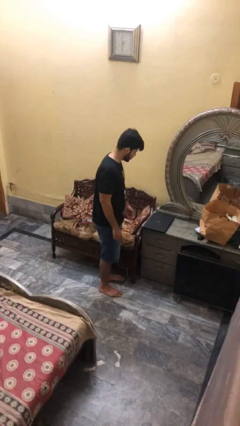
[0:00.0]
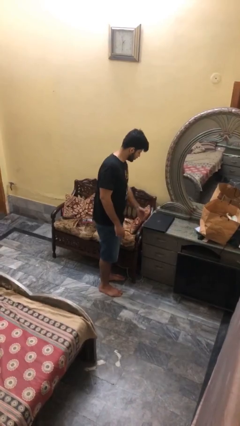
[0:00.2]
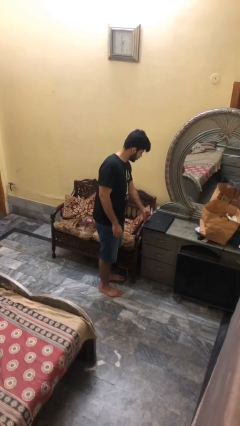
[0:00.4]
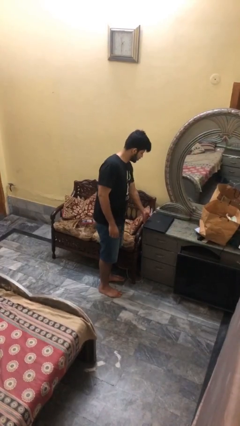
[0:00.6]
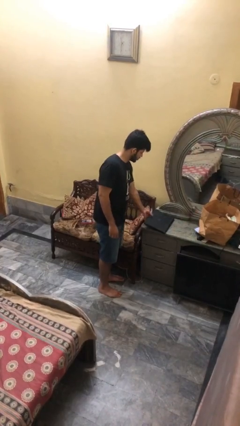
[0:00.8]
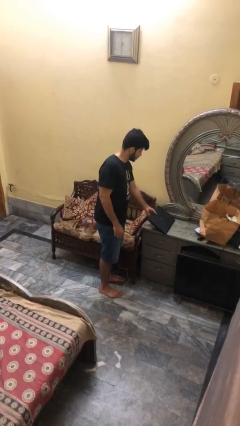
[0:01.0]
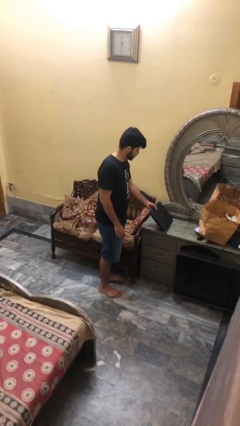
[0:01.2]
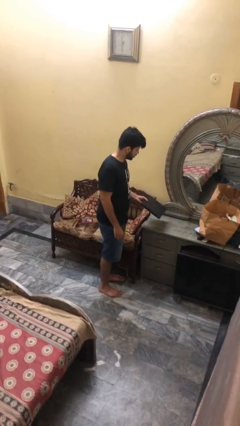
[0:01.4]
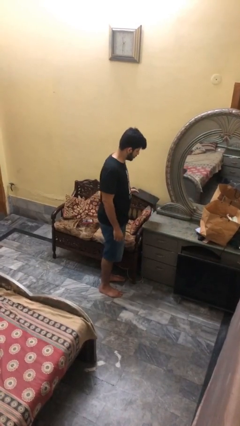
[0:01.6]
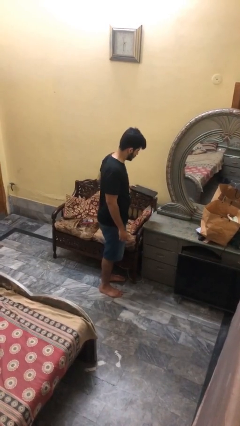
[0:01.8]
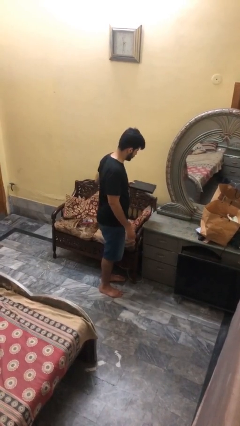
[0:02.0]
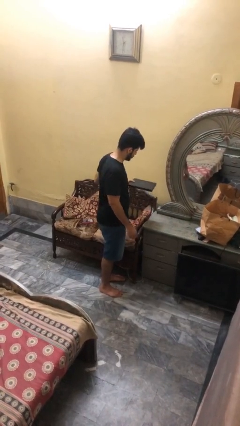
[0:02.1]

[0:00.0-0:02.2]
person picks up object from countertop

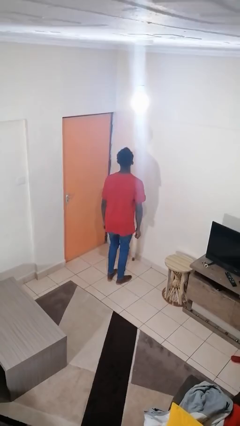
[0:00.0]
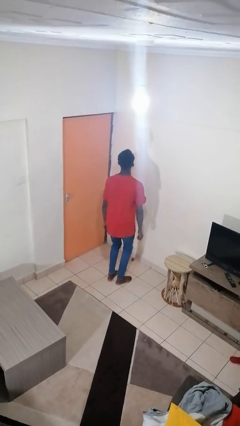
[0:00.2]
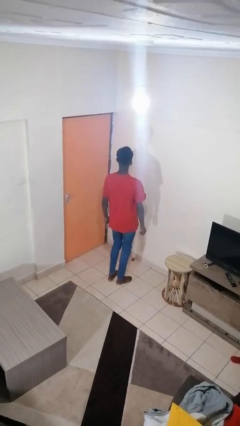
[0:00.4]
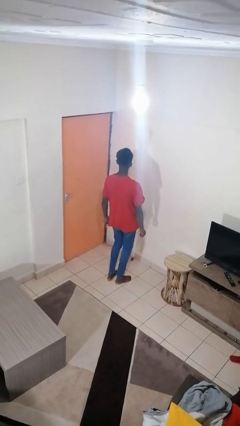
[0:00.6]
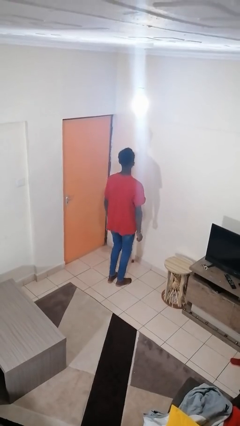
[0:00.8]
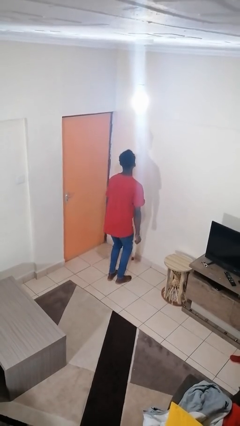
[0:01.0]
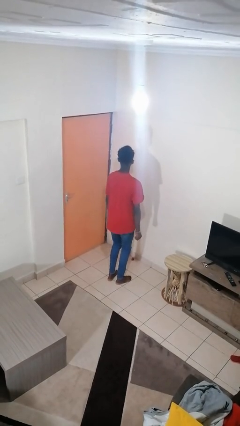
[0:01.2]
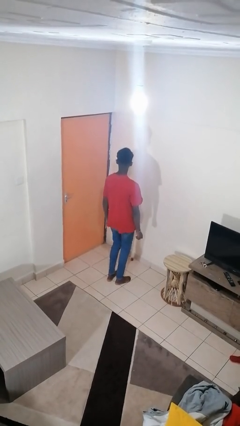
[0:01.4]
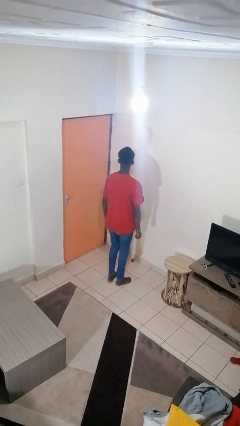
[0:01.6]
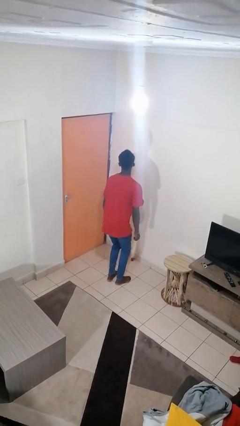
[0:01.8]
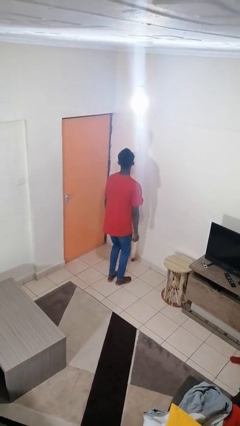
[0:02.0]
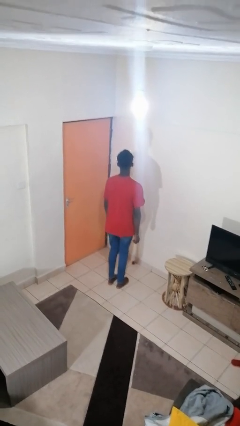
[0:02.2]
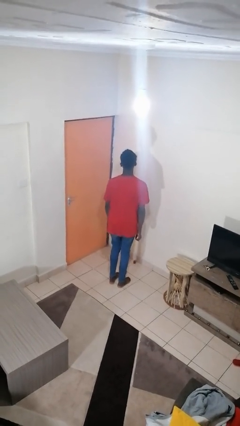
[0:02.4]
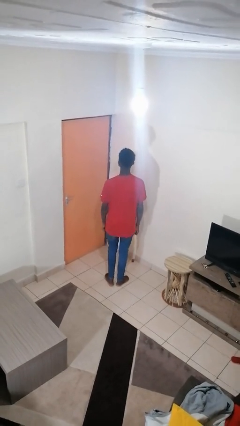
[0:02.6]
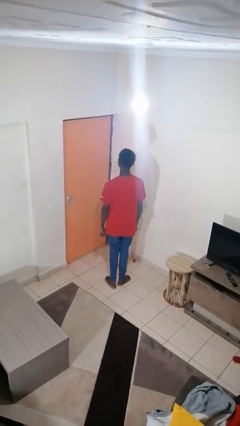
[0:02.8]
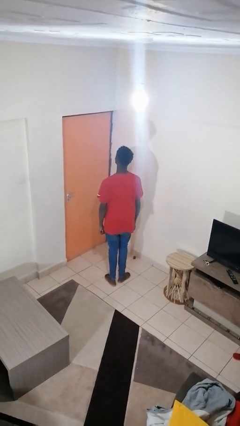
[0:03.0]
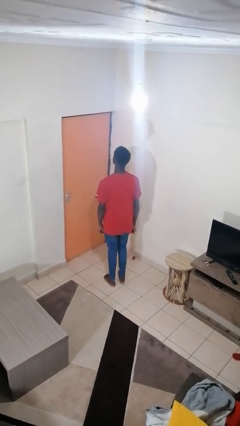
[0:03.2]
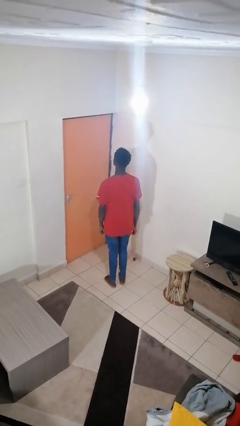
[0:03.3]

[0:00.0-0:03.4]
person wiggles hips

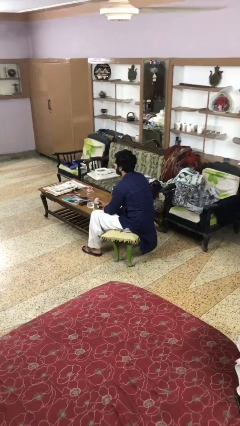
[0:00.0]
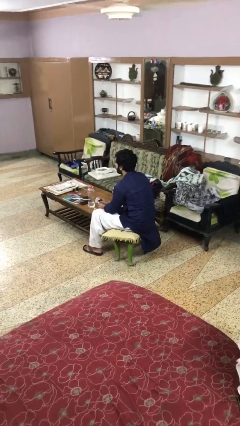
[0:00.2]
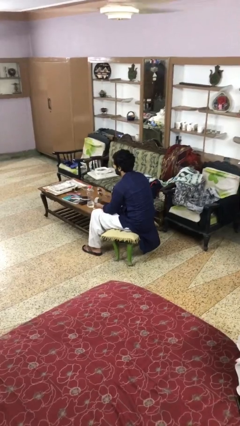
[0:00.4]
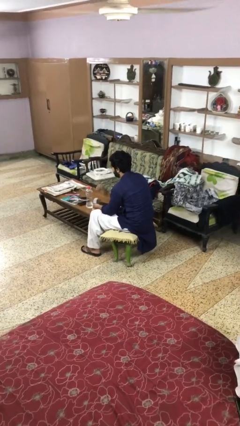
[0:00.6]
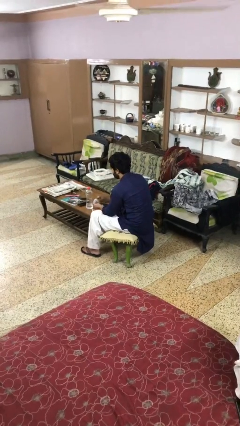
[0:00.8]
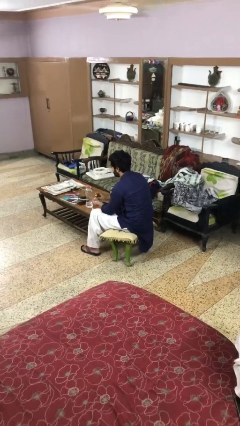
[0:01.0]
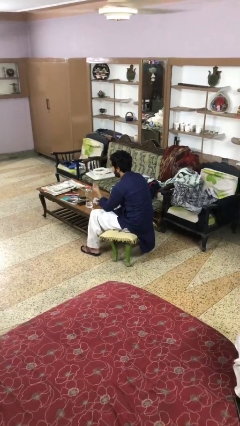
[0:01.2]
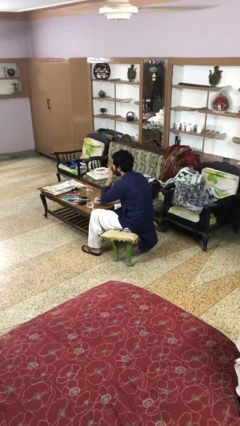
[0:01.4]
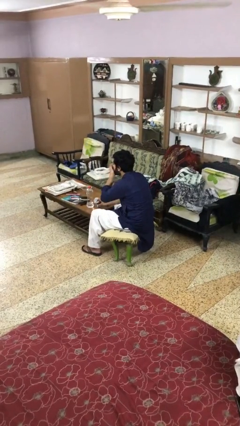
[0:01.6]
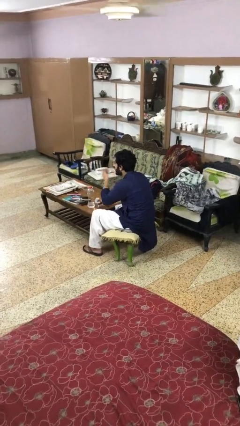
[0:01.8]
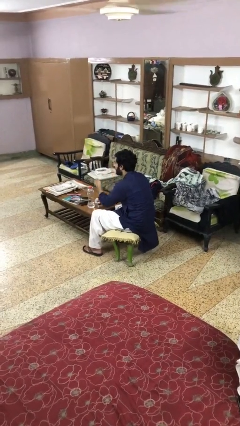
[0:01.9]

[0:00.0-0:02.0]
person takes medicine pills

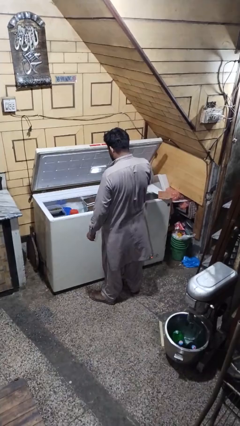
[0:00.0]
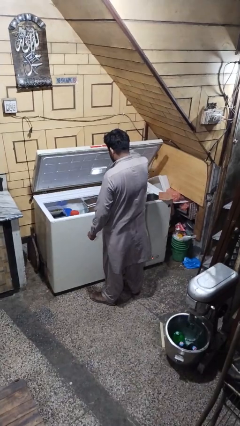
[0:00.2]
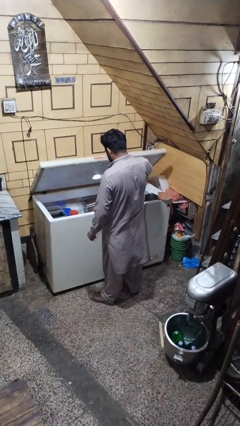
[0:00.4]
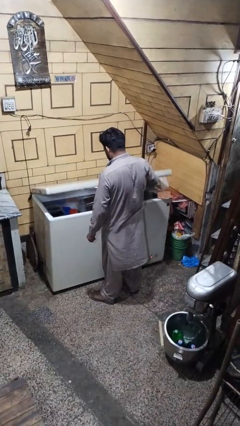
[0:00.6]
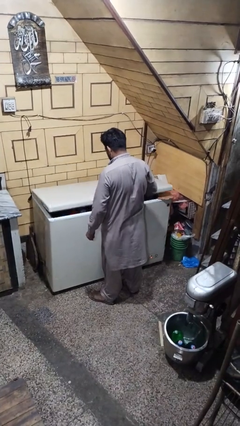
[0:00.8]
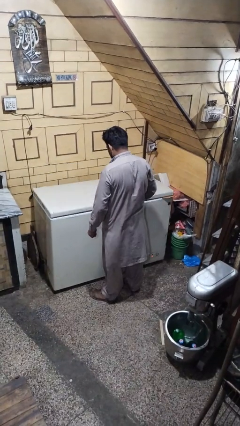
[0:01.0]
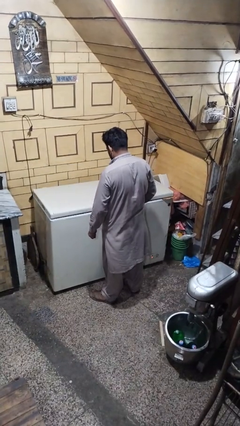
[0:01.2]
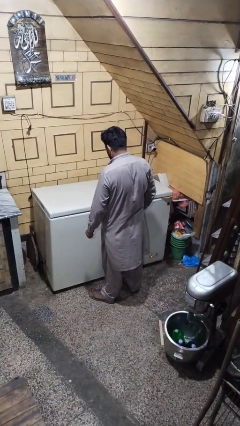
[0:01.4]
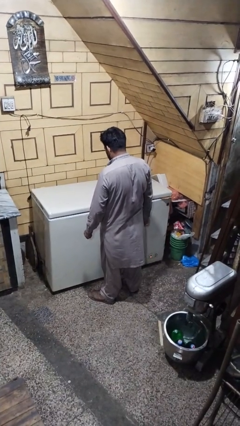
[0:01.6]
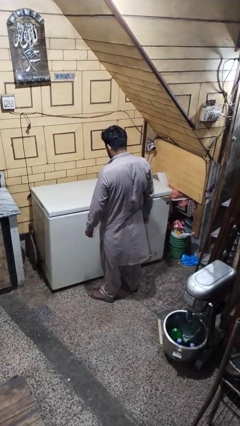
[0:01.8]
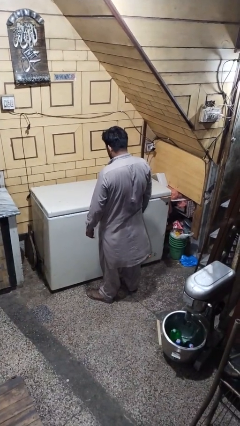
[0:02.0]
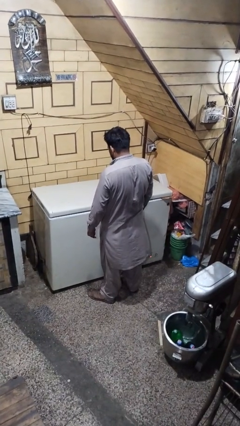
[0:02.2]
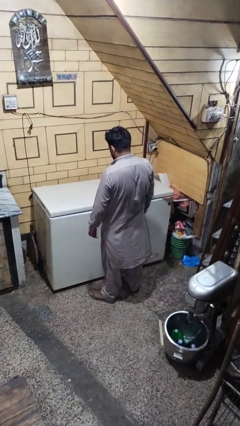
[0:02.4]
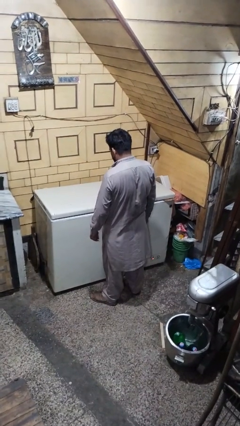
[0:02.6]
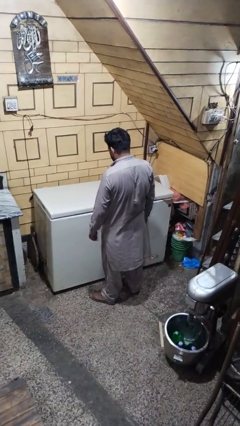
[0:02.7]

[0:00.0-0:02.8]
person closes refrigerator

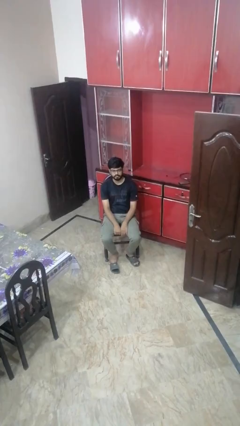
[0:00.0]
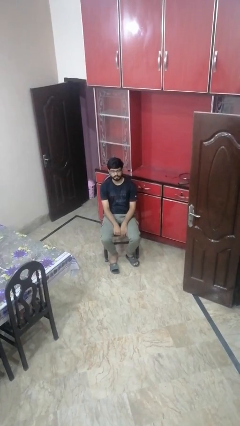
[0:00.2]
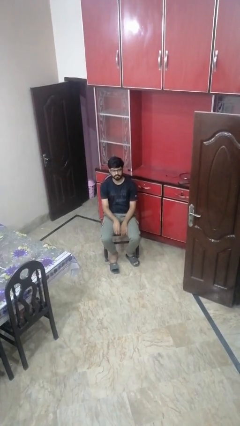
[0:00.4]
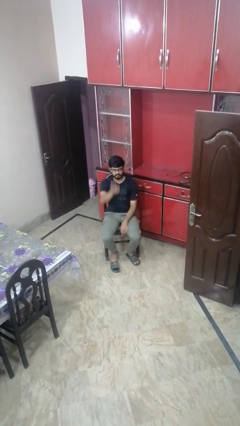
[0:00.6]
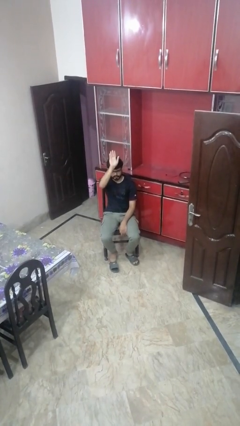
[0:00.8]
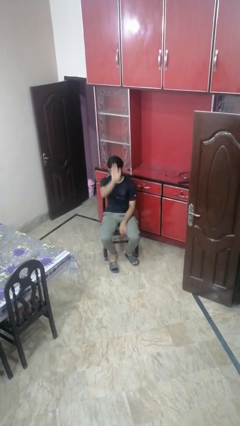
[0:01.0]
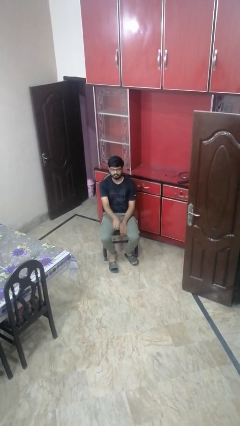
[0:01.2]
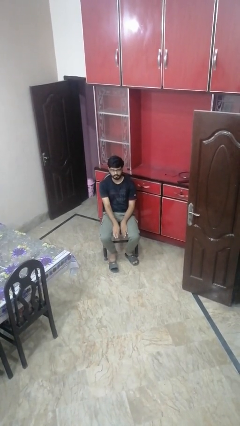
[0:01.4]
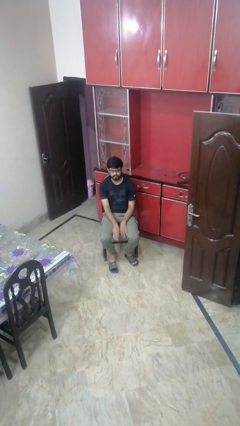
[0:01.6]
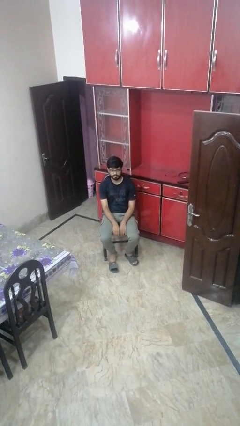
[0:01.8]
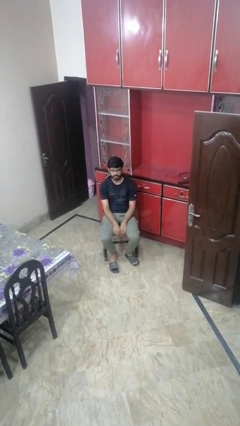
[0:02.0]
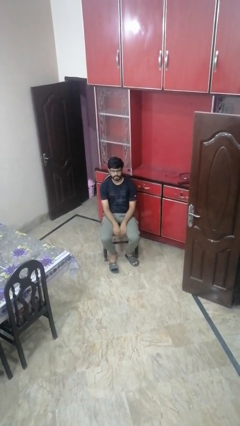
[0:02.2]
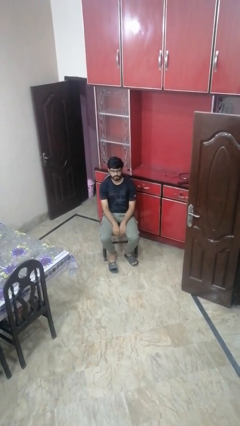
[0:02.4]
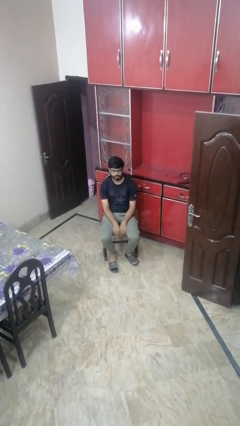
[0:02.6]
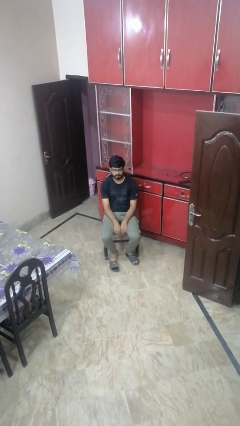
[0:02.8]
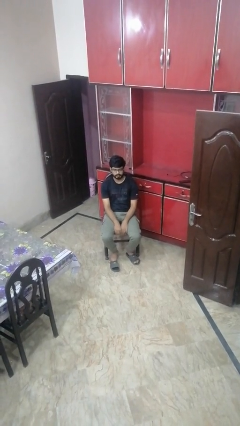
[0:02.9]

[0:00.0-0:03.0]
person gestures swipe down

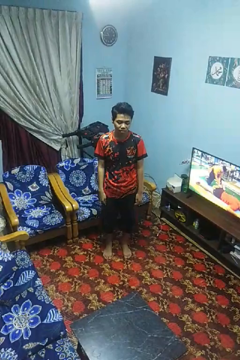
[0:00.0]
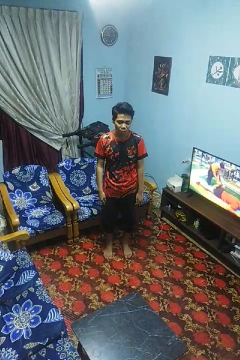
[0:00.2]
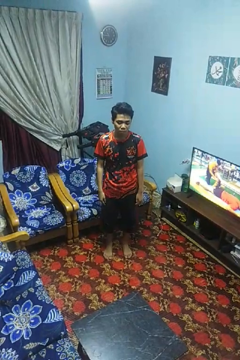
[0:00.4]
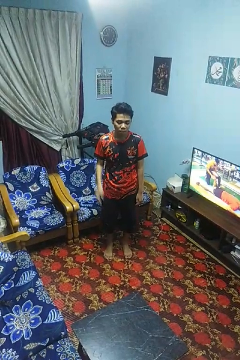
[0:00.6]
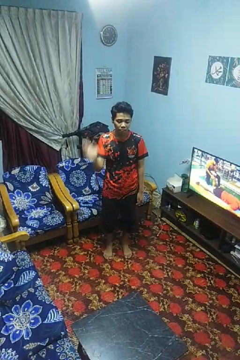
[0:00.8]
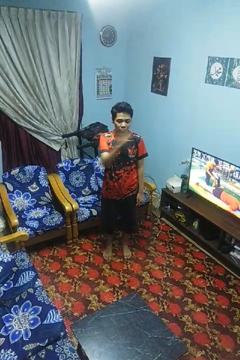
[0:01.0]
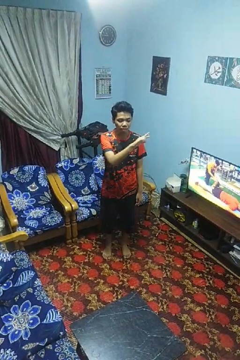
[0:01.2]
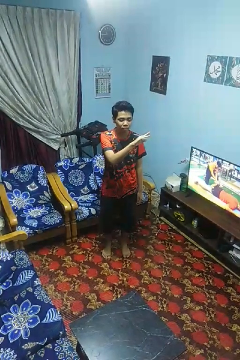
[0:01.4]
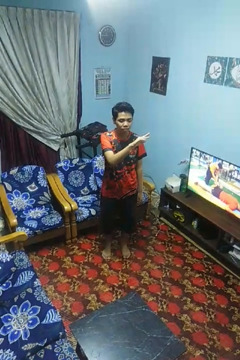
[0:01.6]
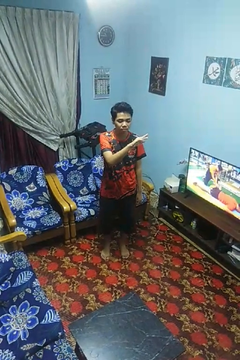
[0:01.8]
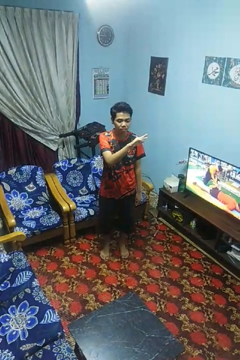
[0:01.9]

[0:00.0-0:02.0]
person gestures swipe left

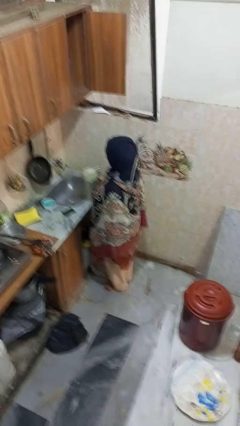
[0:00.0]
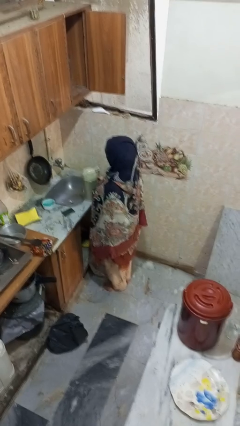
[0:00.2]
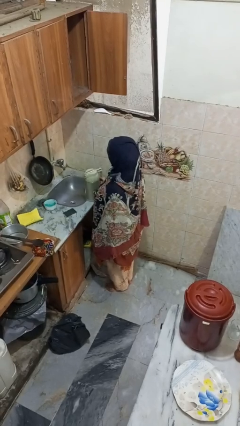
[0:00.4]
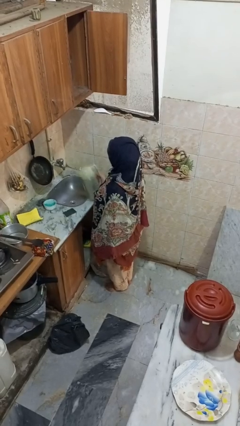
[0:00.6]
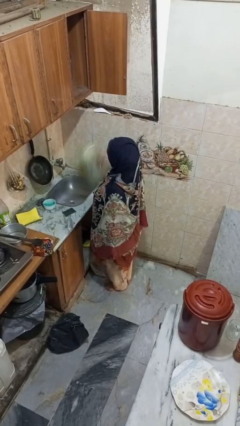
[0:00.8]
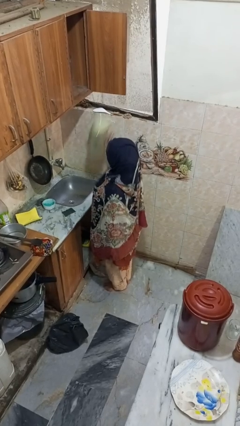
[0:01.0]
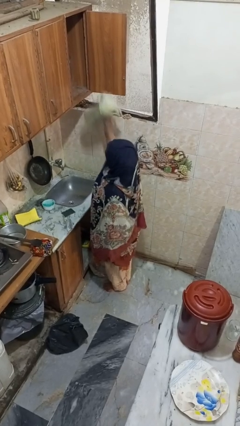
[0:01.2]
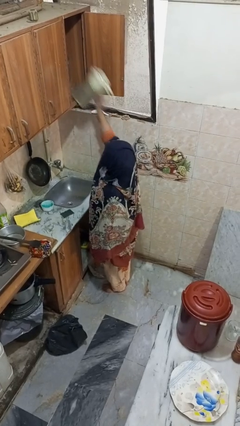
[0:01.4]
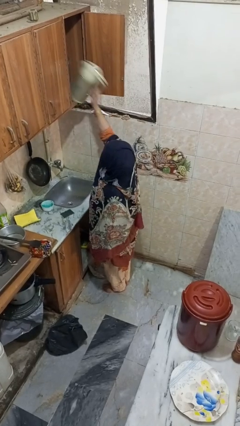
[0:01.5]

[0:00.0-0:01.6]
person takes object from cabinet

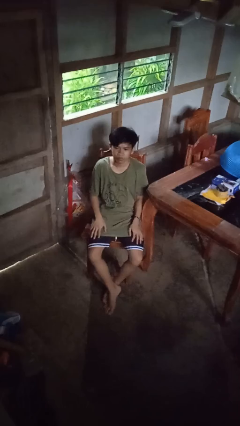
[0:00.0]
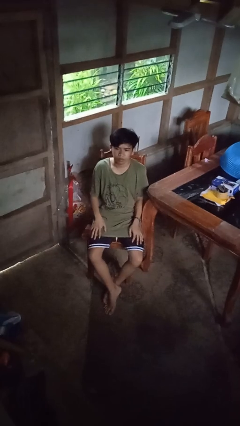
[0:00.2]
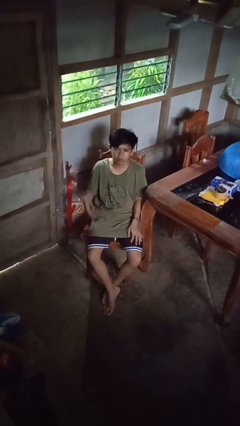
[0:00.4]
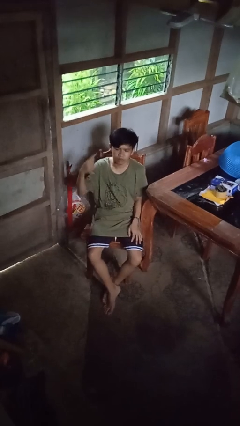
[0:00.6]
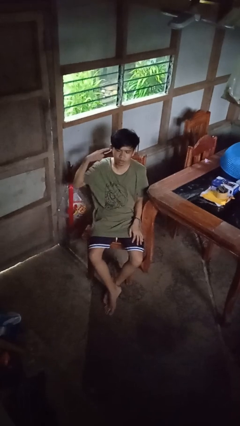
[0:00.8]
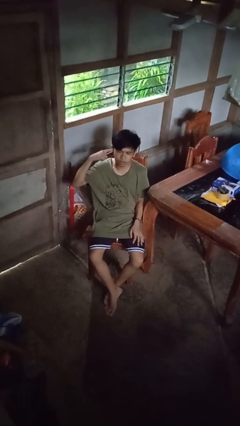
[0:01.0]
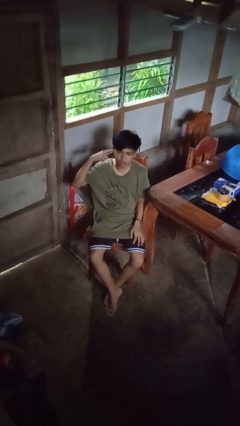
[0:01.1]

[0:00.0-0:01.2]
person gestures listen closely
